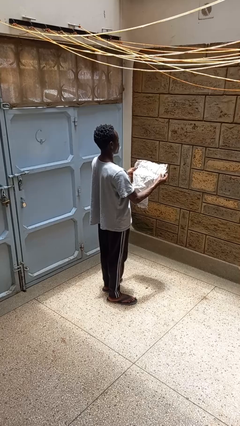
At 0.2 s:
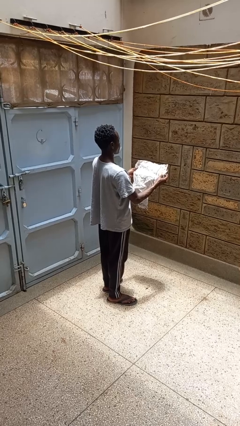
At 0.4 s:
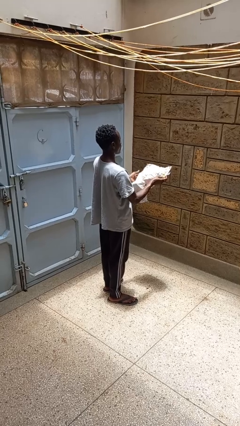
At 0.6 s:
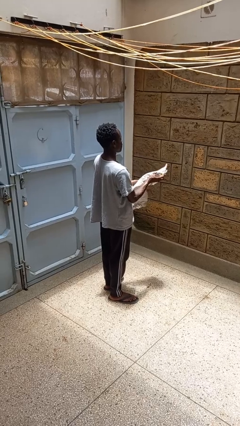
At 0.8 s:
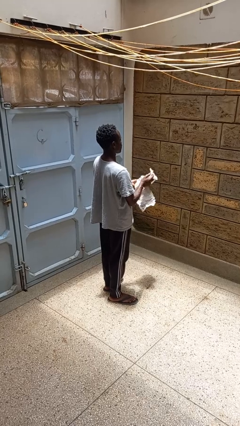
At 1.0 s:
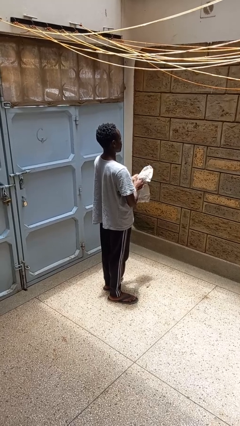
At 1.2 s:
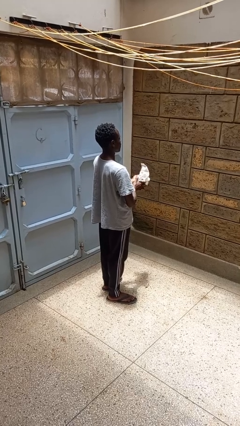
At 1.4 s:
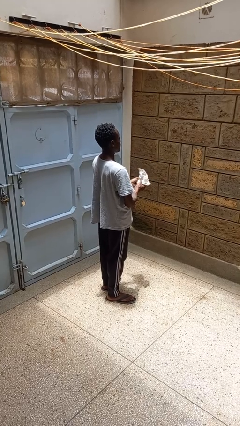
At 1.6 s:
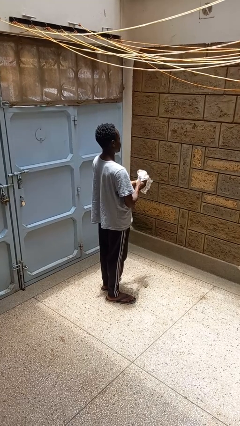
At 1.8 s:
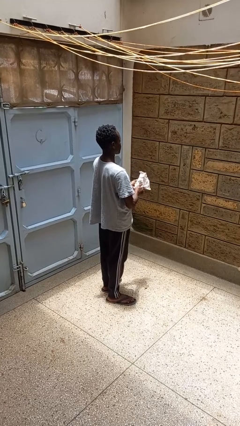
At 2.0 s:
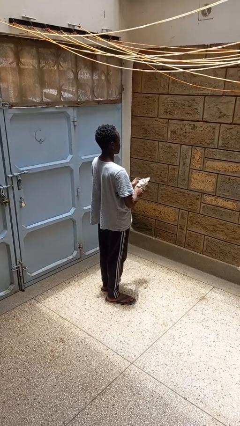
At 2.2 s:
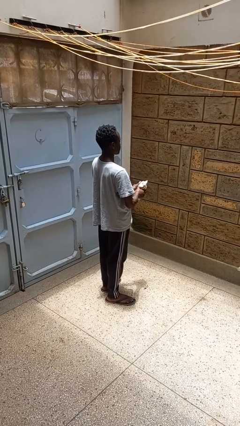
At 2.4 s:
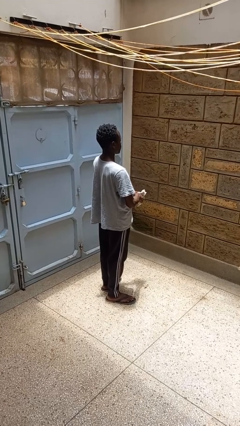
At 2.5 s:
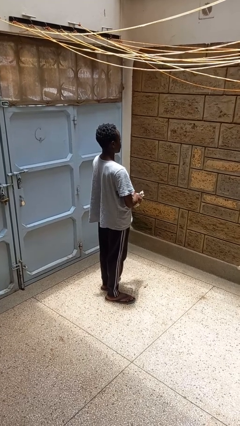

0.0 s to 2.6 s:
person crumples paper

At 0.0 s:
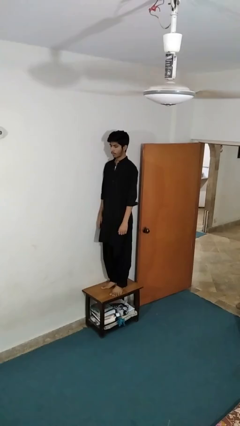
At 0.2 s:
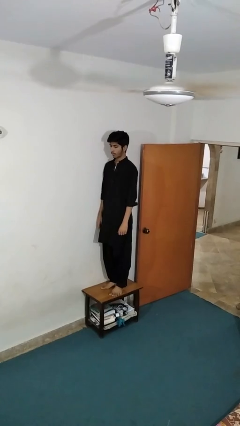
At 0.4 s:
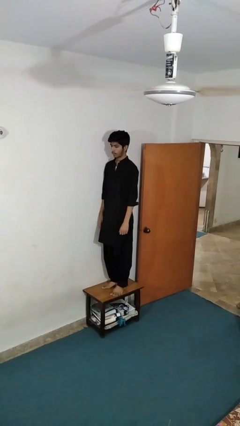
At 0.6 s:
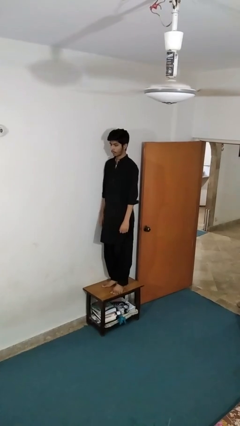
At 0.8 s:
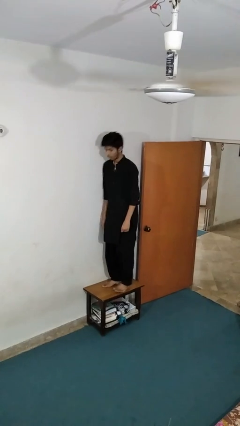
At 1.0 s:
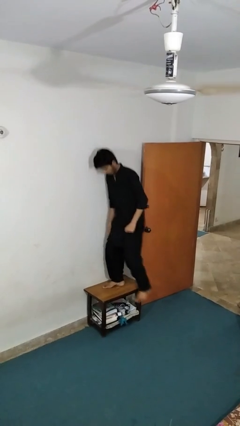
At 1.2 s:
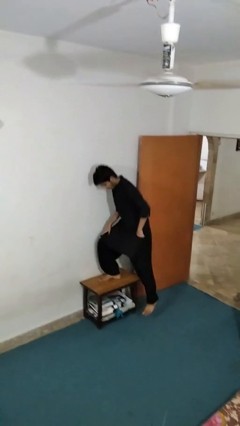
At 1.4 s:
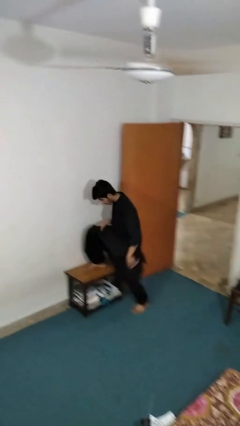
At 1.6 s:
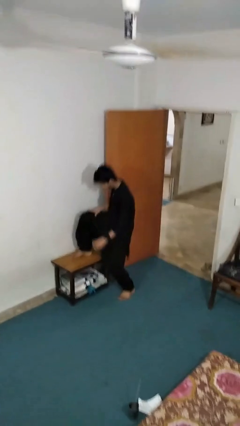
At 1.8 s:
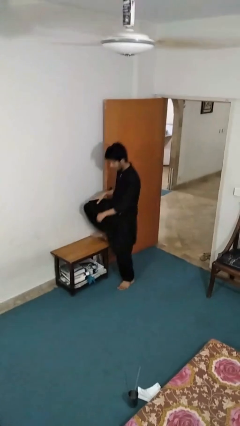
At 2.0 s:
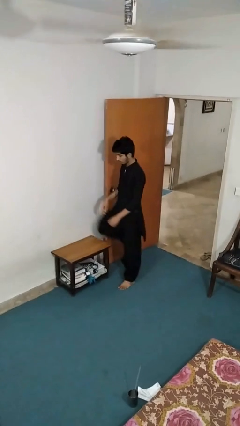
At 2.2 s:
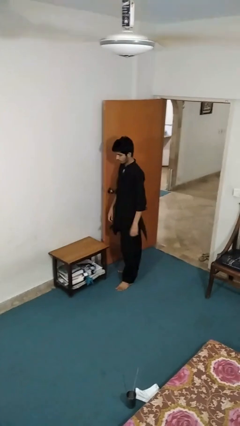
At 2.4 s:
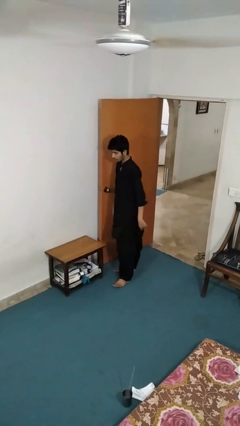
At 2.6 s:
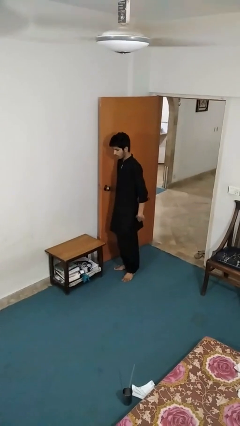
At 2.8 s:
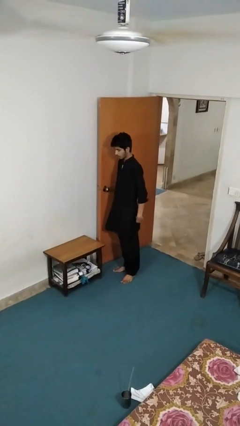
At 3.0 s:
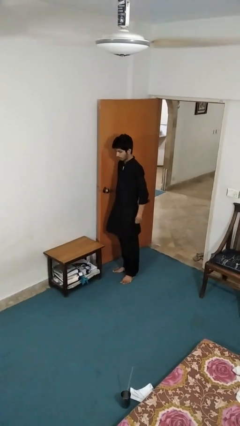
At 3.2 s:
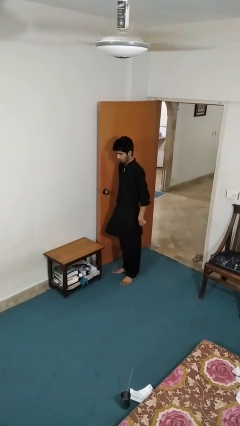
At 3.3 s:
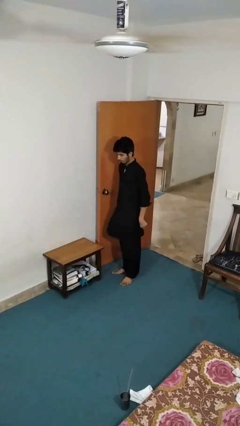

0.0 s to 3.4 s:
person climbs off table

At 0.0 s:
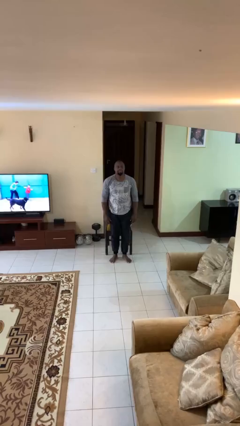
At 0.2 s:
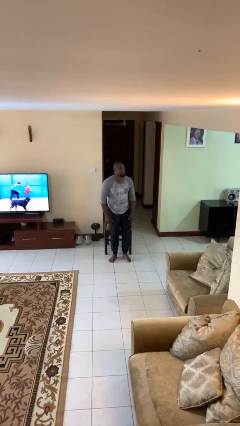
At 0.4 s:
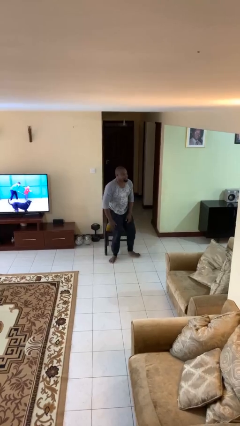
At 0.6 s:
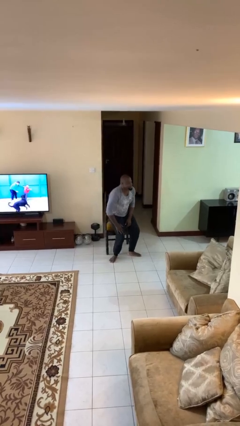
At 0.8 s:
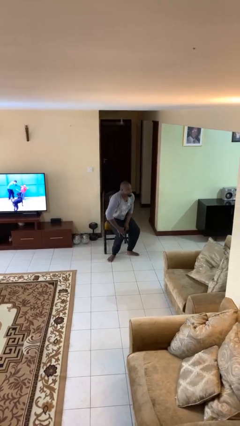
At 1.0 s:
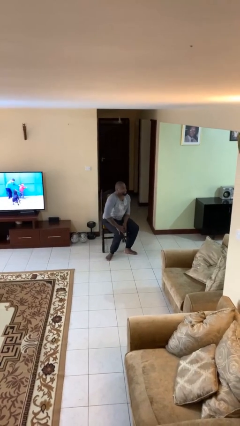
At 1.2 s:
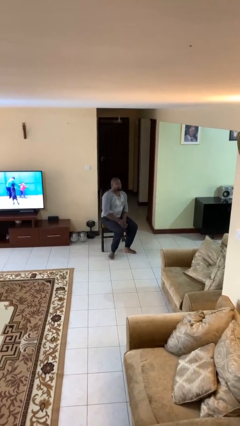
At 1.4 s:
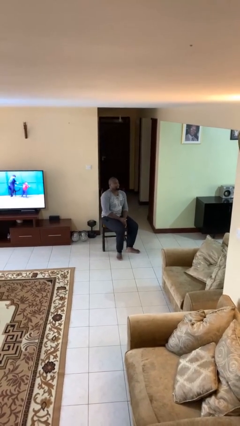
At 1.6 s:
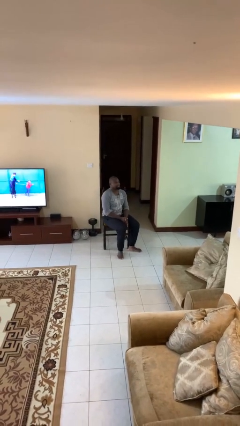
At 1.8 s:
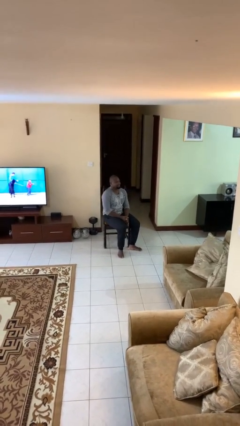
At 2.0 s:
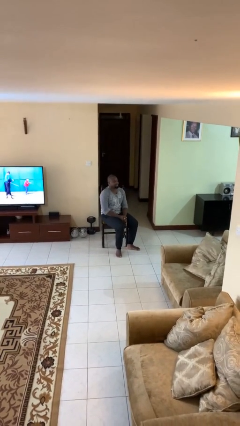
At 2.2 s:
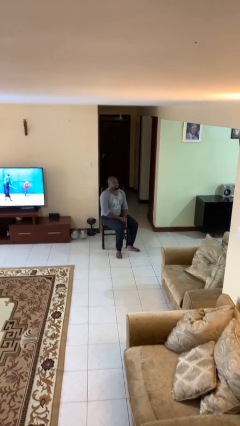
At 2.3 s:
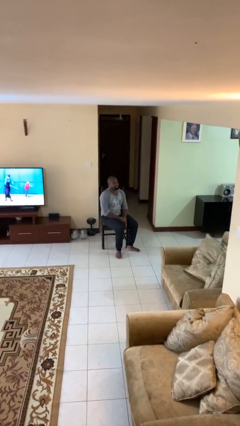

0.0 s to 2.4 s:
person sits down

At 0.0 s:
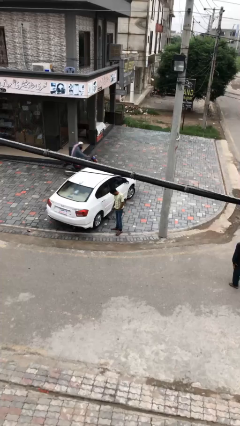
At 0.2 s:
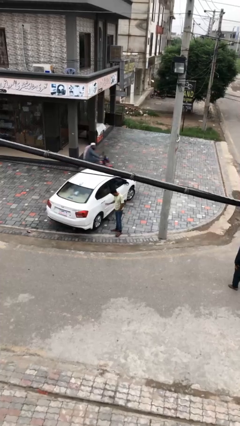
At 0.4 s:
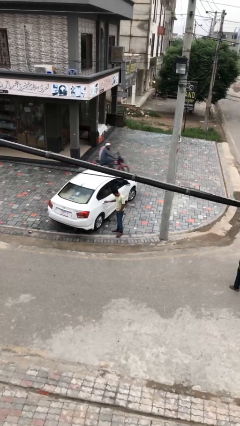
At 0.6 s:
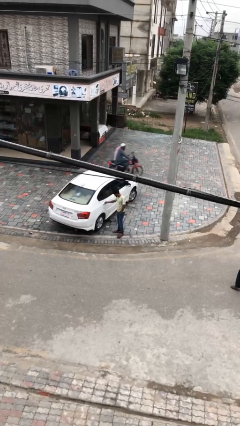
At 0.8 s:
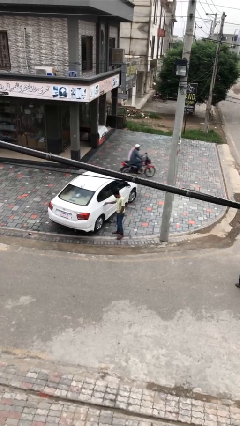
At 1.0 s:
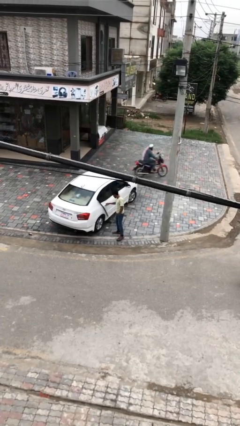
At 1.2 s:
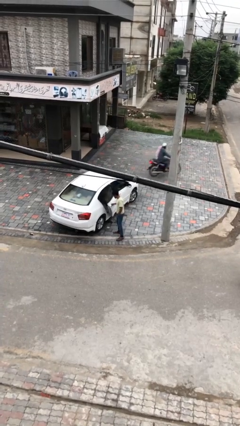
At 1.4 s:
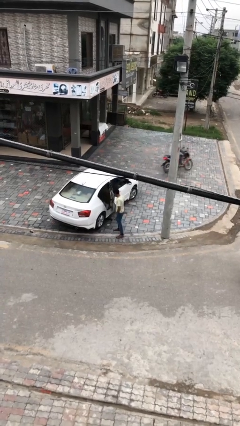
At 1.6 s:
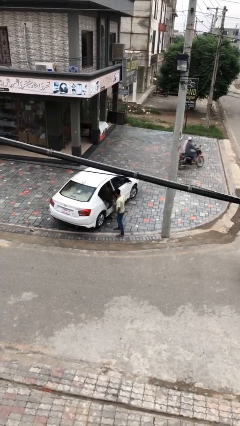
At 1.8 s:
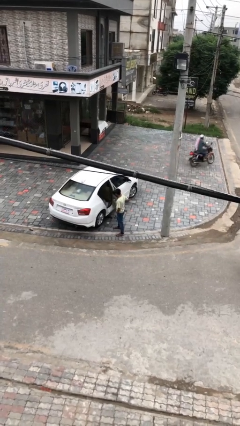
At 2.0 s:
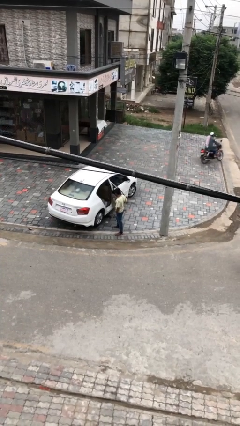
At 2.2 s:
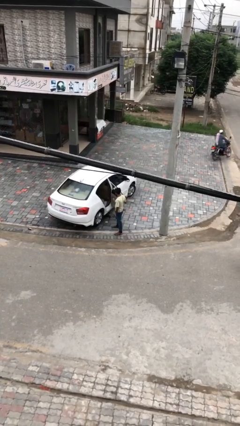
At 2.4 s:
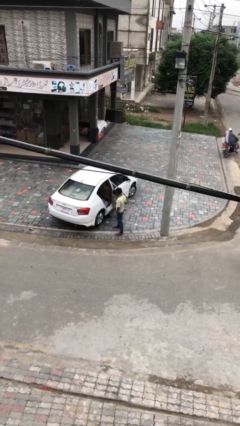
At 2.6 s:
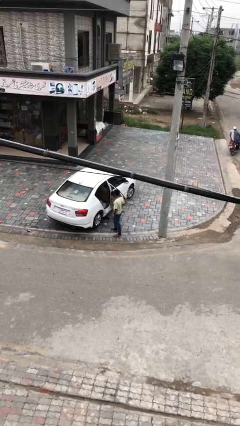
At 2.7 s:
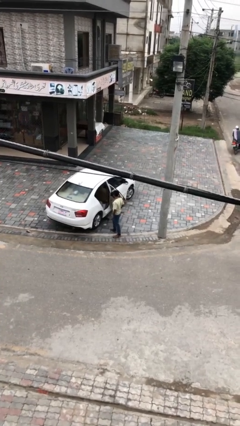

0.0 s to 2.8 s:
person opens car door

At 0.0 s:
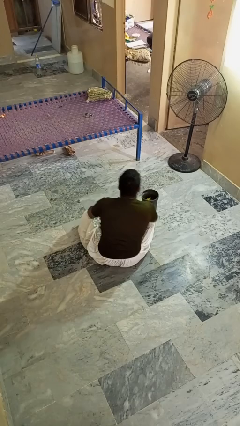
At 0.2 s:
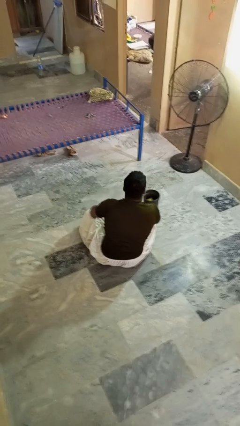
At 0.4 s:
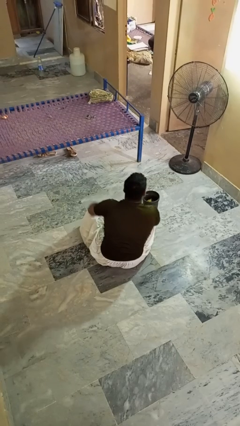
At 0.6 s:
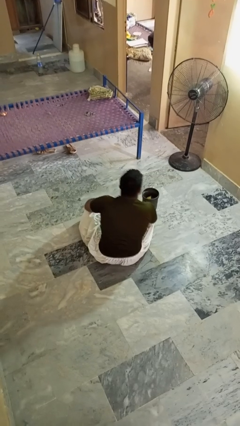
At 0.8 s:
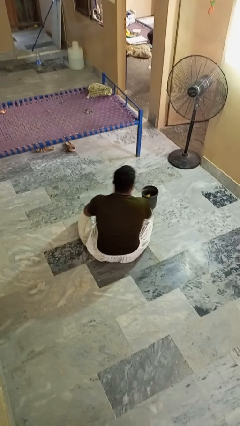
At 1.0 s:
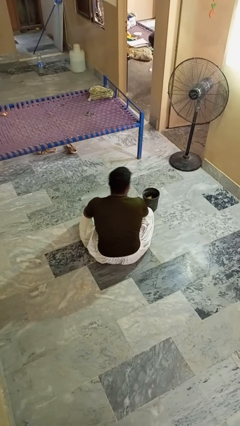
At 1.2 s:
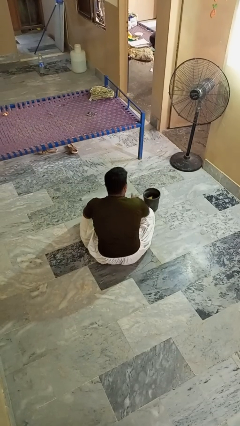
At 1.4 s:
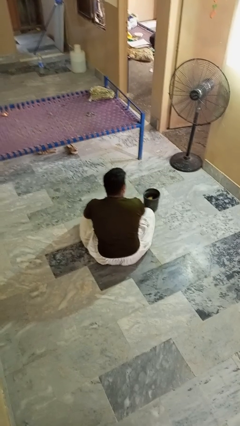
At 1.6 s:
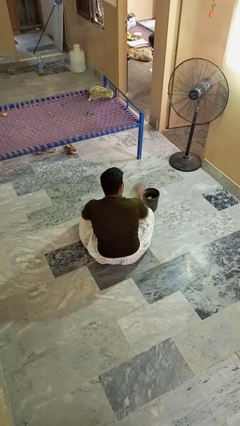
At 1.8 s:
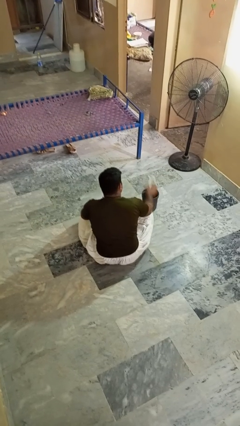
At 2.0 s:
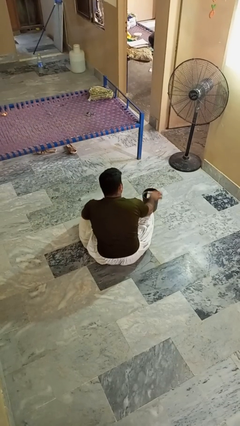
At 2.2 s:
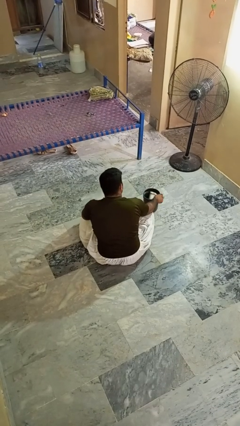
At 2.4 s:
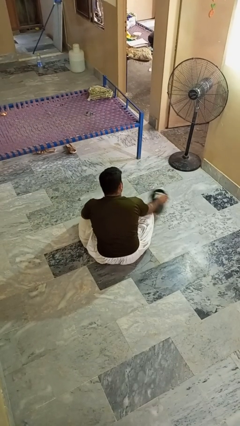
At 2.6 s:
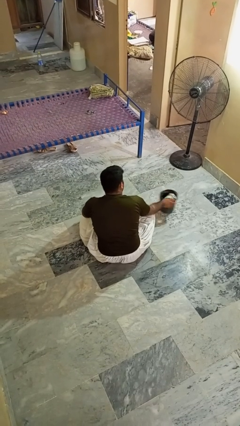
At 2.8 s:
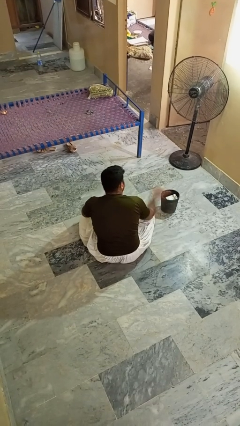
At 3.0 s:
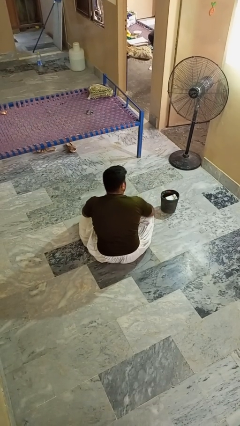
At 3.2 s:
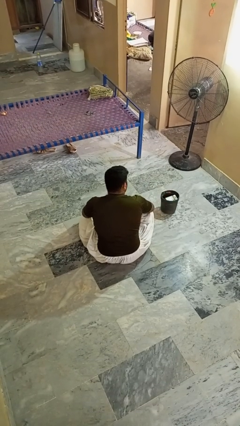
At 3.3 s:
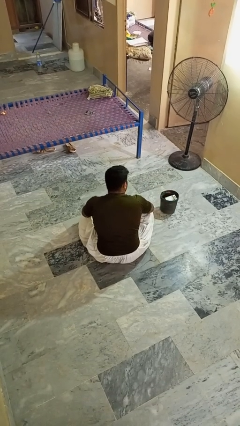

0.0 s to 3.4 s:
person puts object into basket

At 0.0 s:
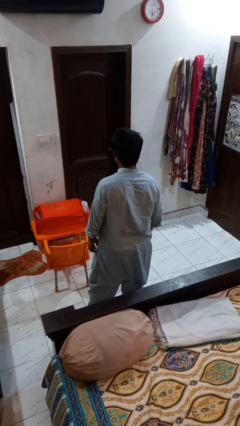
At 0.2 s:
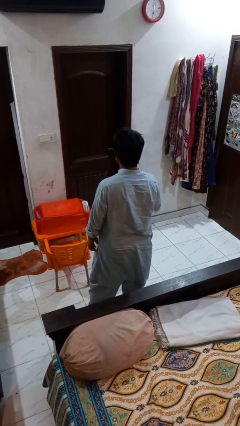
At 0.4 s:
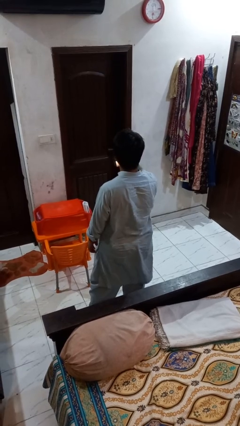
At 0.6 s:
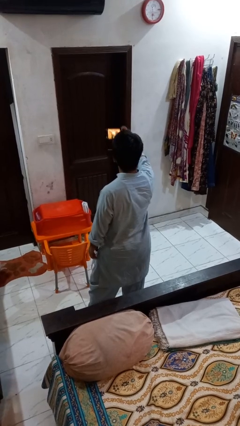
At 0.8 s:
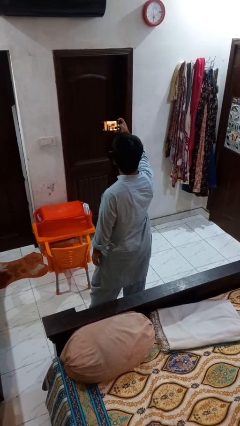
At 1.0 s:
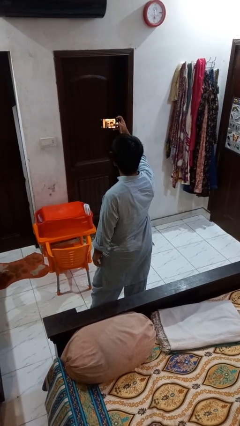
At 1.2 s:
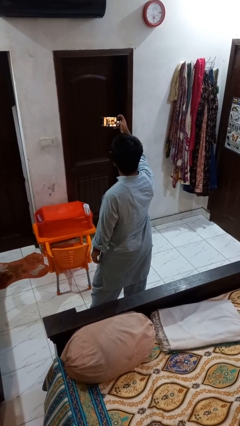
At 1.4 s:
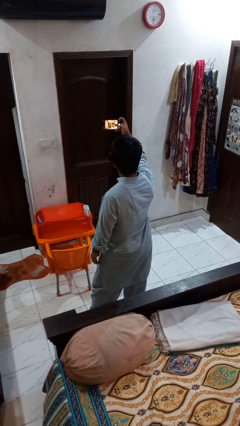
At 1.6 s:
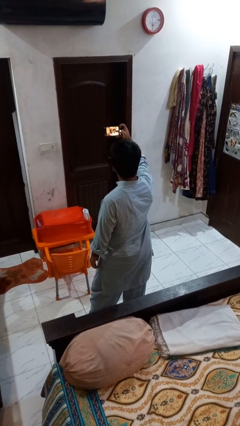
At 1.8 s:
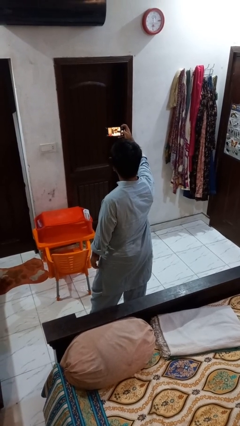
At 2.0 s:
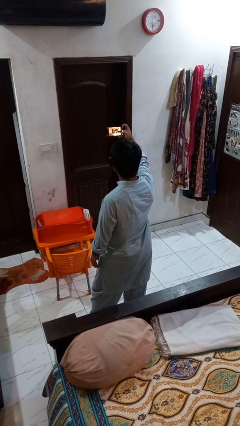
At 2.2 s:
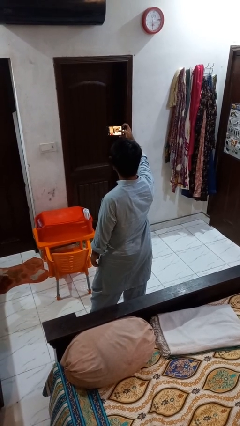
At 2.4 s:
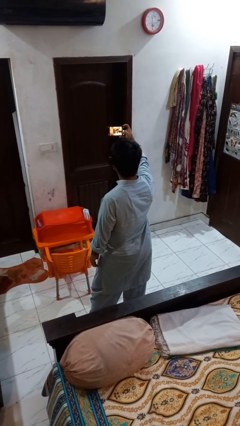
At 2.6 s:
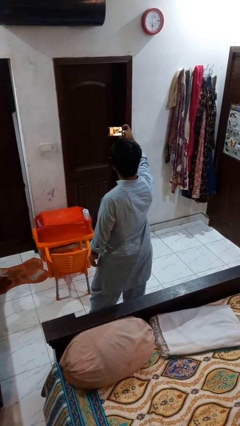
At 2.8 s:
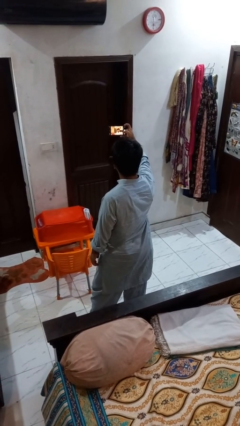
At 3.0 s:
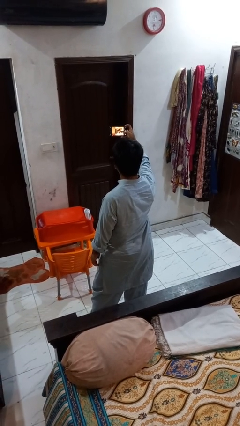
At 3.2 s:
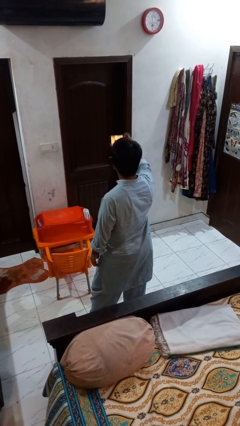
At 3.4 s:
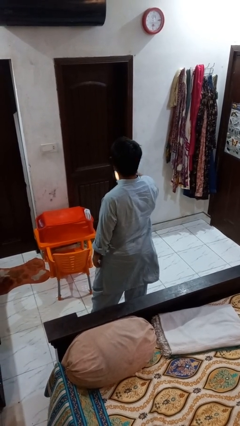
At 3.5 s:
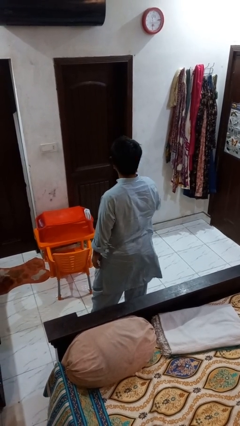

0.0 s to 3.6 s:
person takes selfie
